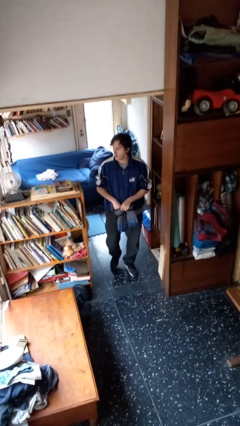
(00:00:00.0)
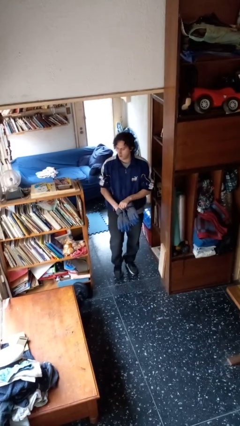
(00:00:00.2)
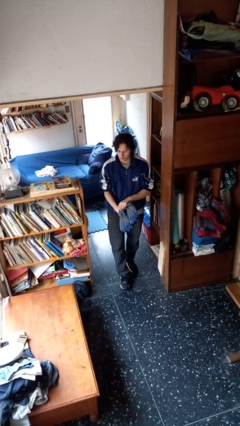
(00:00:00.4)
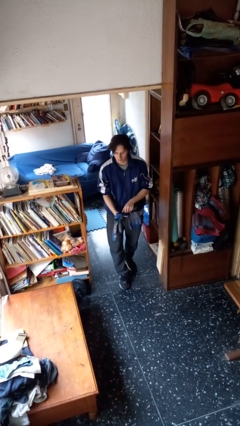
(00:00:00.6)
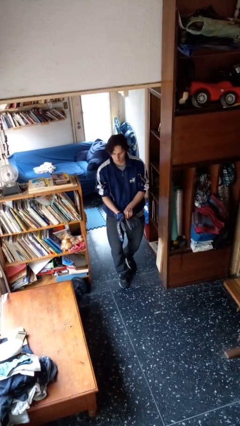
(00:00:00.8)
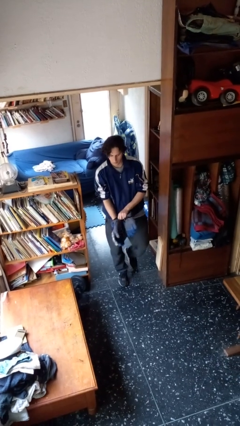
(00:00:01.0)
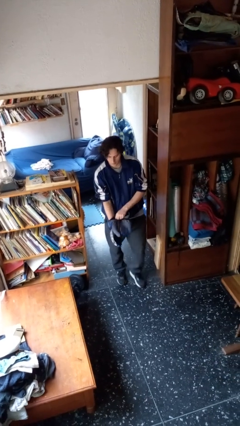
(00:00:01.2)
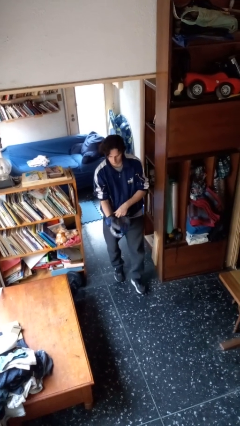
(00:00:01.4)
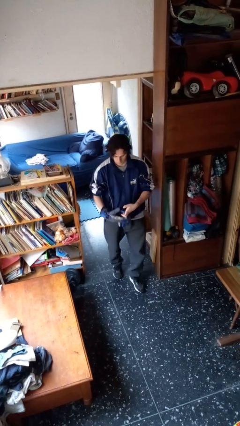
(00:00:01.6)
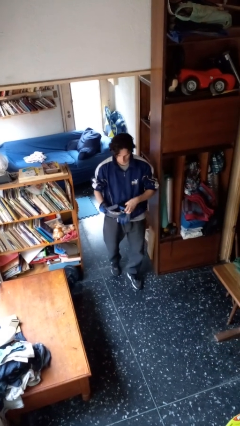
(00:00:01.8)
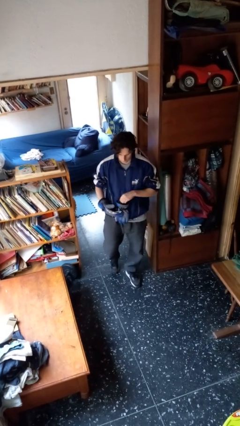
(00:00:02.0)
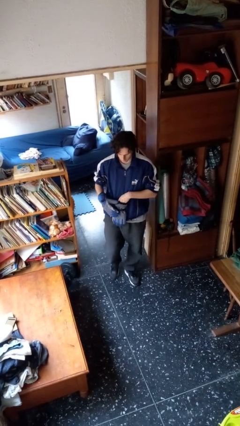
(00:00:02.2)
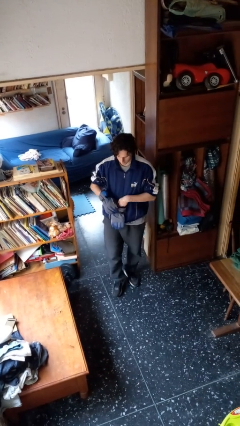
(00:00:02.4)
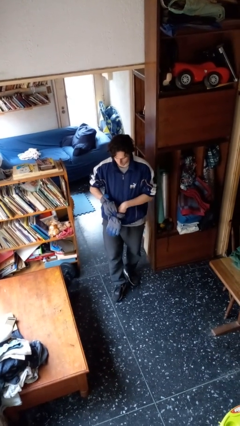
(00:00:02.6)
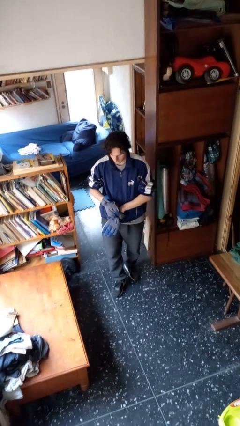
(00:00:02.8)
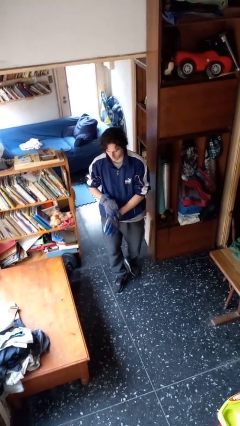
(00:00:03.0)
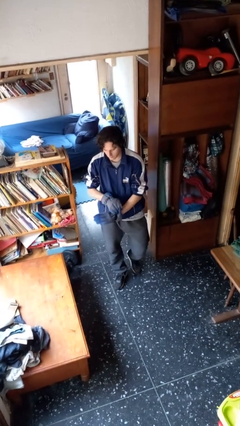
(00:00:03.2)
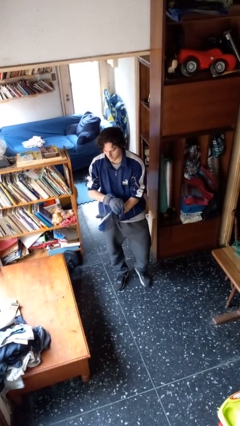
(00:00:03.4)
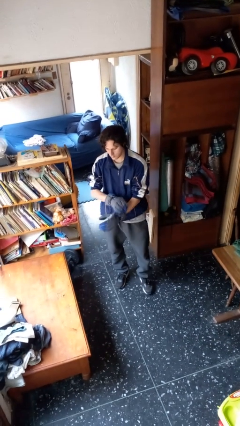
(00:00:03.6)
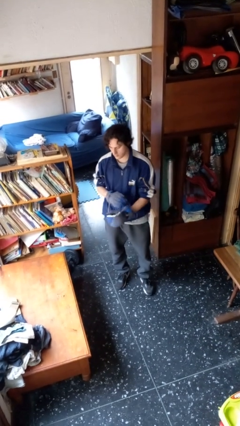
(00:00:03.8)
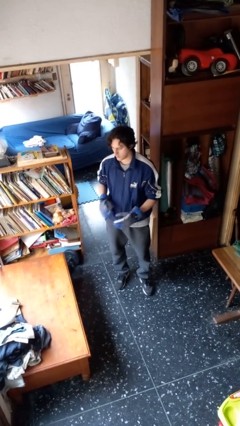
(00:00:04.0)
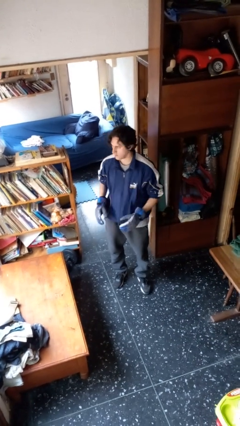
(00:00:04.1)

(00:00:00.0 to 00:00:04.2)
person puts on gloves

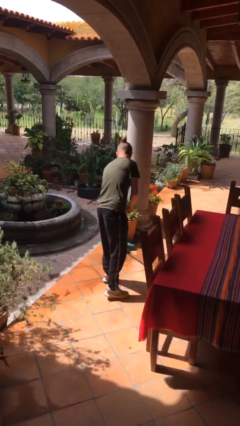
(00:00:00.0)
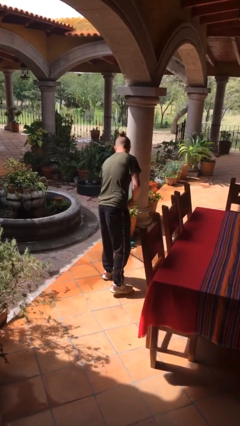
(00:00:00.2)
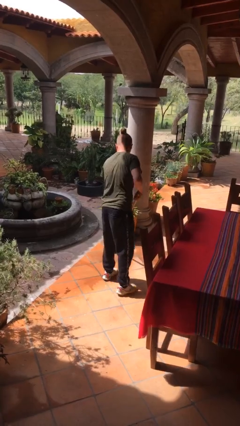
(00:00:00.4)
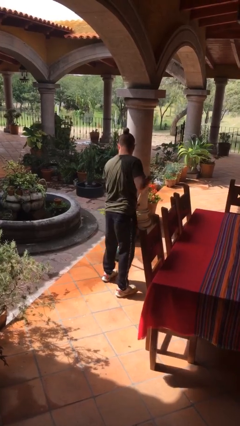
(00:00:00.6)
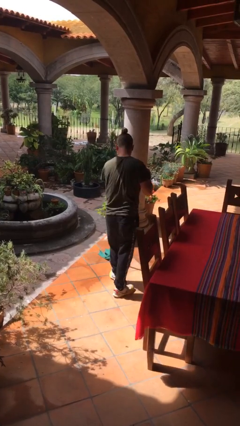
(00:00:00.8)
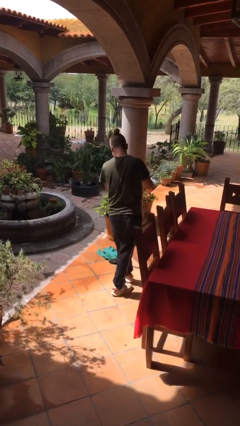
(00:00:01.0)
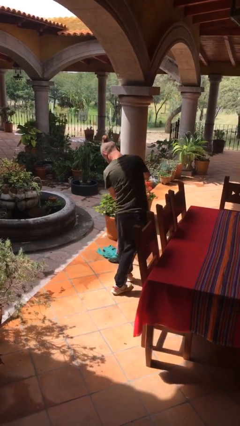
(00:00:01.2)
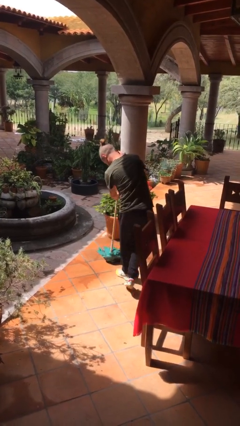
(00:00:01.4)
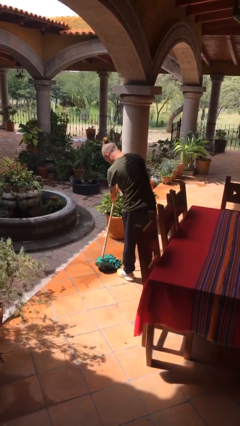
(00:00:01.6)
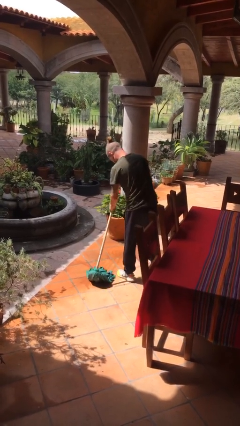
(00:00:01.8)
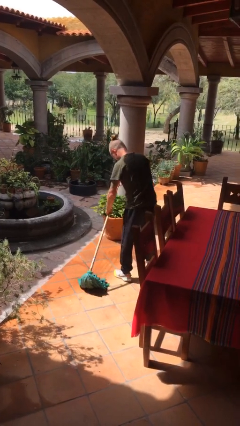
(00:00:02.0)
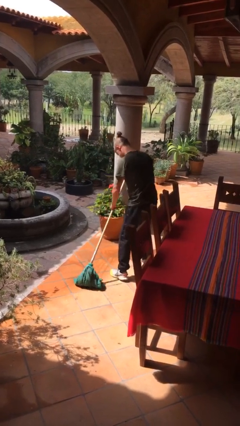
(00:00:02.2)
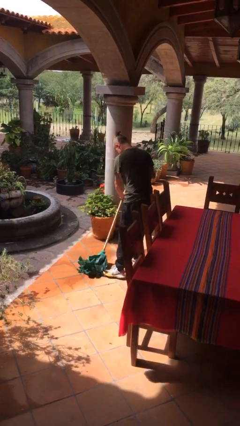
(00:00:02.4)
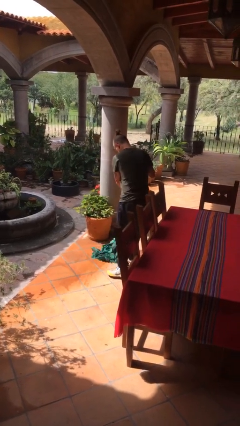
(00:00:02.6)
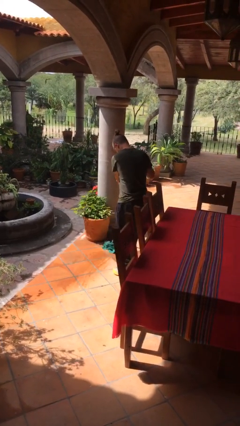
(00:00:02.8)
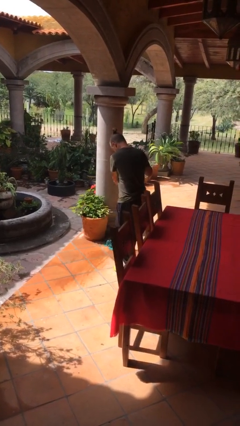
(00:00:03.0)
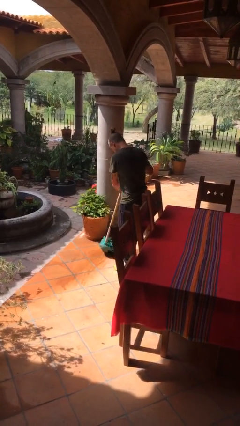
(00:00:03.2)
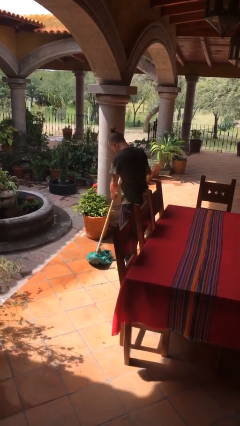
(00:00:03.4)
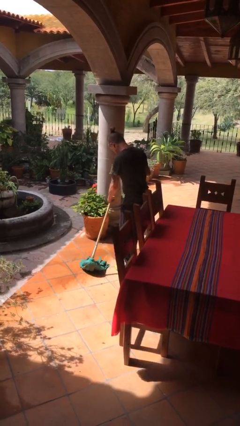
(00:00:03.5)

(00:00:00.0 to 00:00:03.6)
person mops

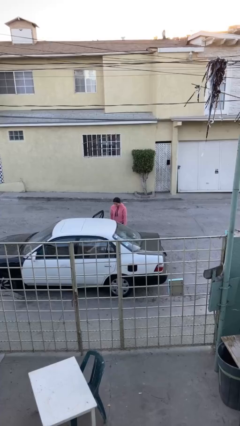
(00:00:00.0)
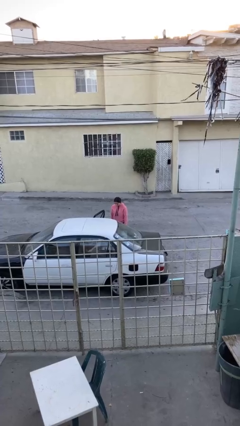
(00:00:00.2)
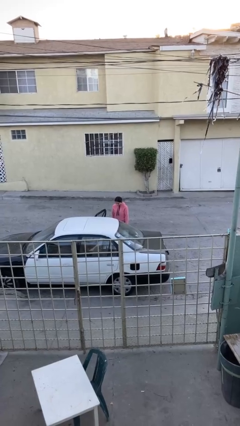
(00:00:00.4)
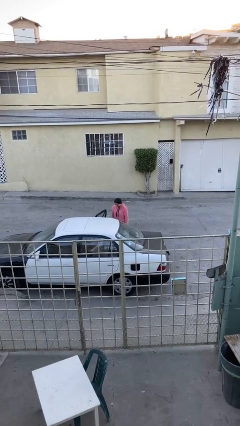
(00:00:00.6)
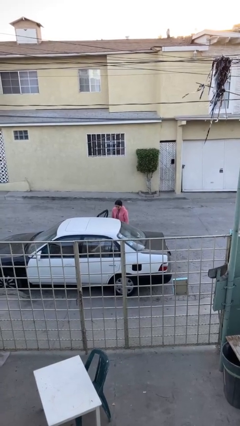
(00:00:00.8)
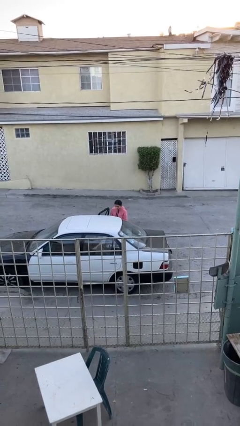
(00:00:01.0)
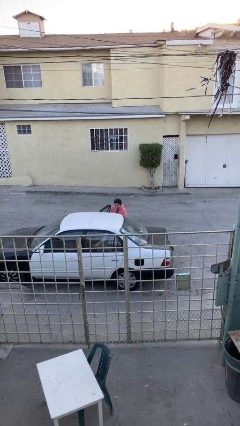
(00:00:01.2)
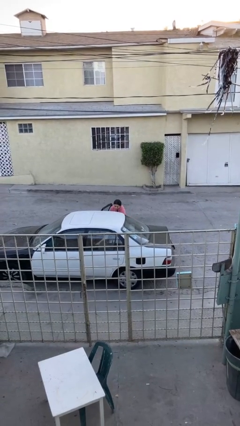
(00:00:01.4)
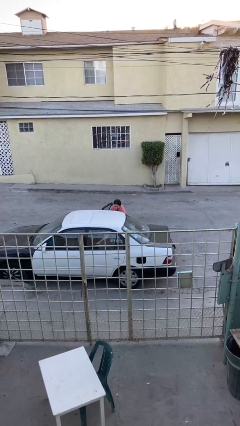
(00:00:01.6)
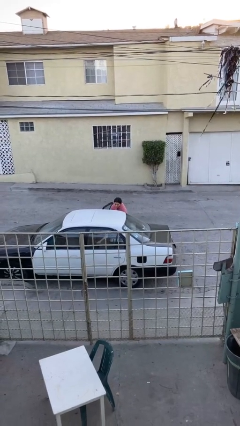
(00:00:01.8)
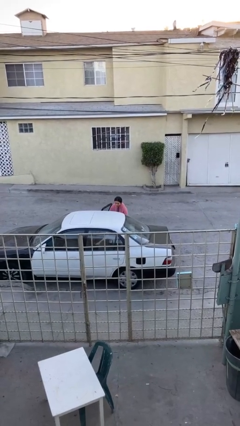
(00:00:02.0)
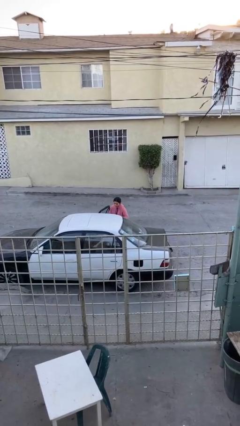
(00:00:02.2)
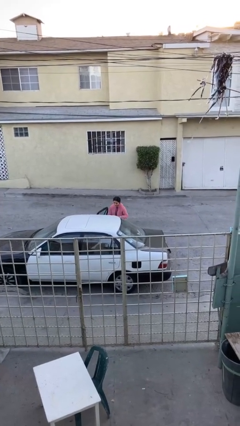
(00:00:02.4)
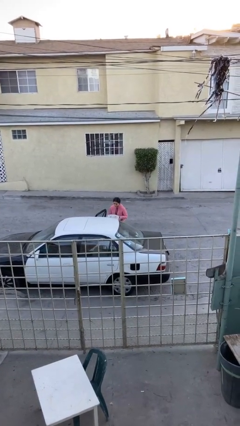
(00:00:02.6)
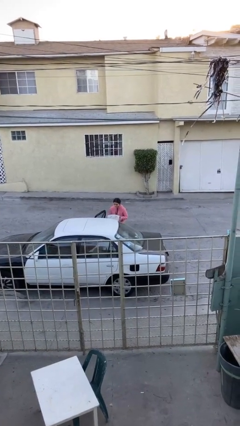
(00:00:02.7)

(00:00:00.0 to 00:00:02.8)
person unloads car

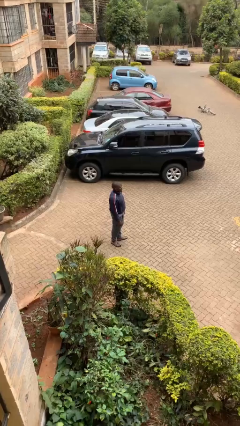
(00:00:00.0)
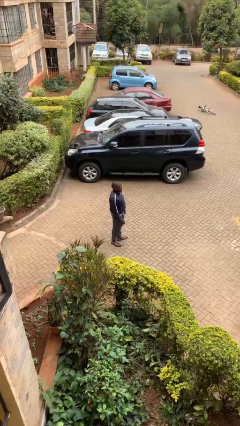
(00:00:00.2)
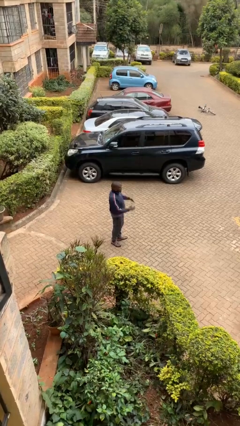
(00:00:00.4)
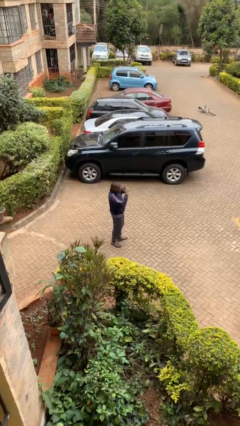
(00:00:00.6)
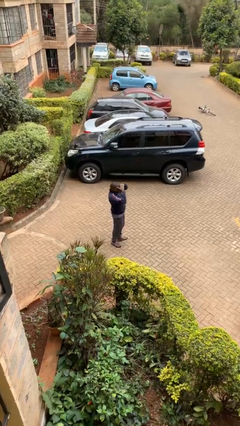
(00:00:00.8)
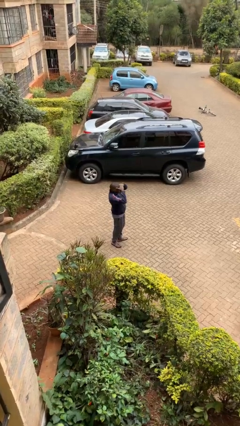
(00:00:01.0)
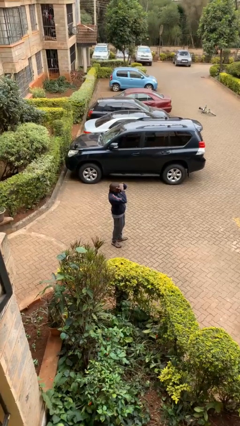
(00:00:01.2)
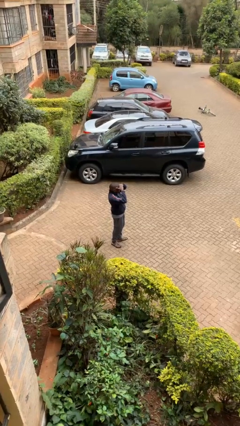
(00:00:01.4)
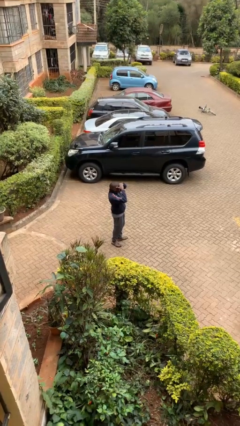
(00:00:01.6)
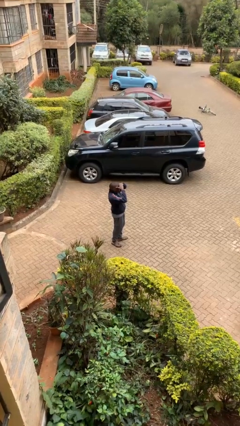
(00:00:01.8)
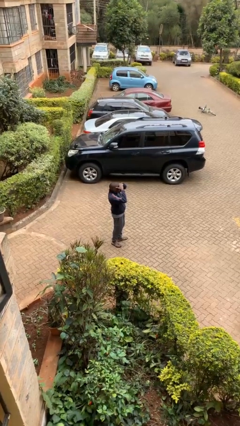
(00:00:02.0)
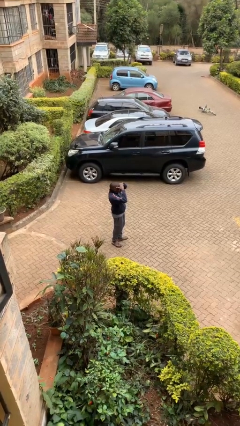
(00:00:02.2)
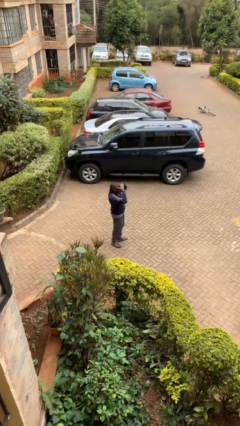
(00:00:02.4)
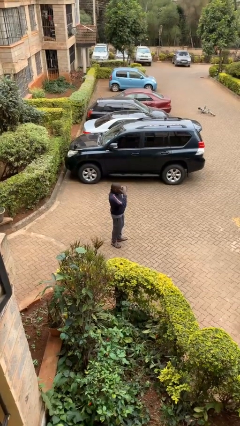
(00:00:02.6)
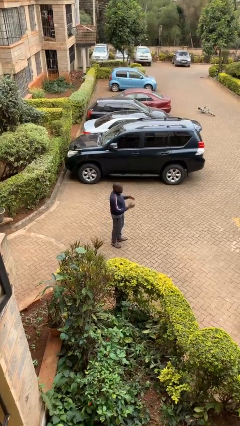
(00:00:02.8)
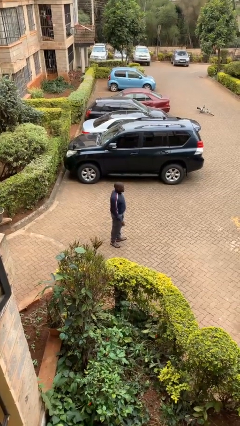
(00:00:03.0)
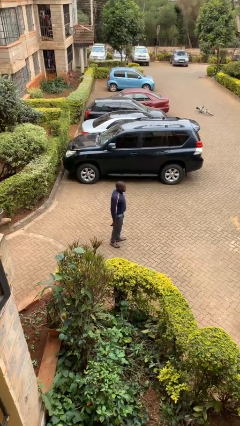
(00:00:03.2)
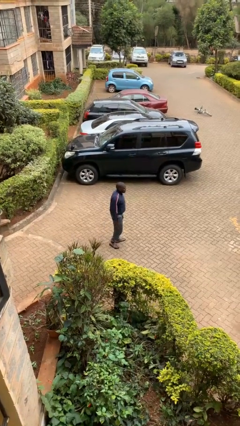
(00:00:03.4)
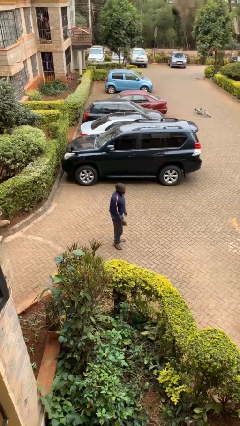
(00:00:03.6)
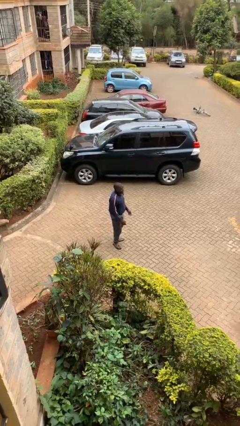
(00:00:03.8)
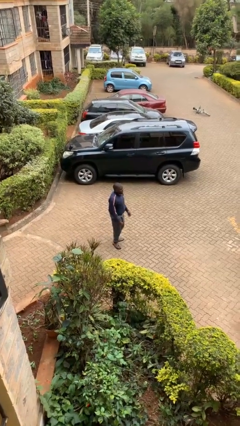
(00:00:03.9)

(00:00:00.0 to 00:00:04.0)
person shades eyes

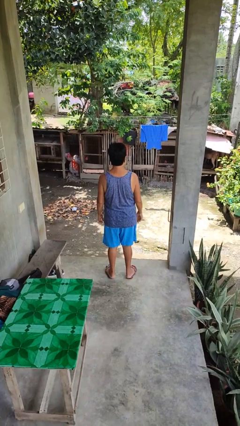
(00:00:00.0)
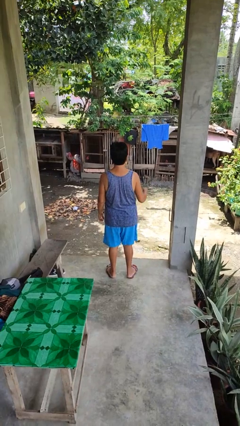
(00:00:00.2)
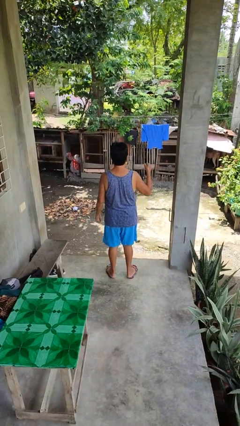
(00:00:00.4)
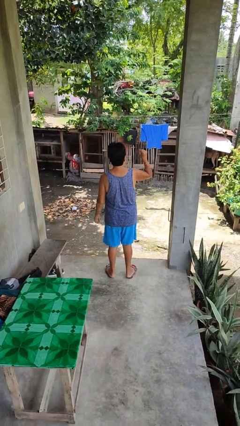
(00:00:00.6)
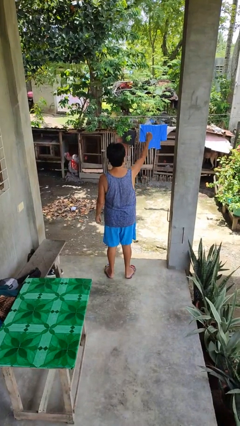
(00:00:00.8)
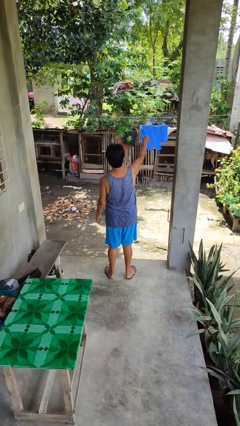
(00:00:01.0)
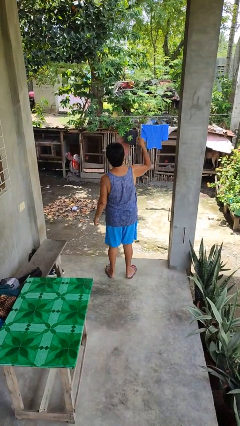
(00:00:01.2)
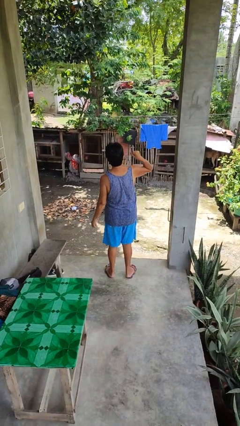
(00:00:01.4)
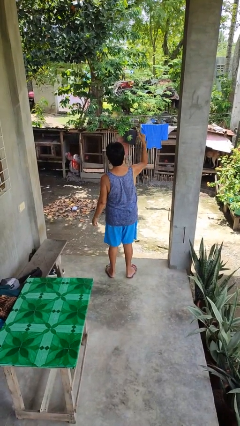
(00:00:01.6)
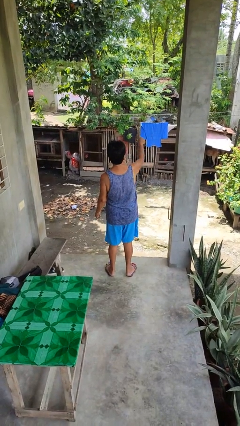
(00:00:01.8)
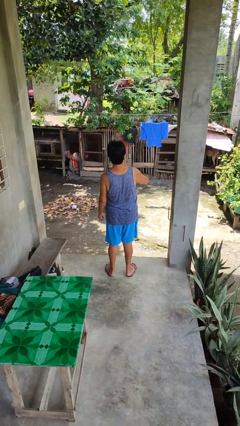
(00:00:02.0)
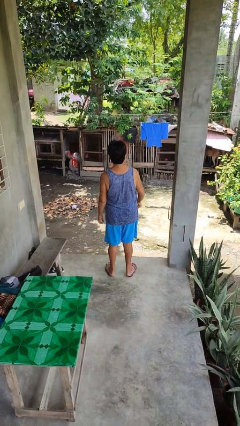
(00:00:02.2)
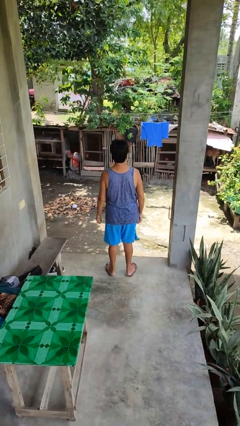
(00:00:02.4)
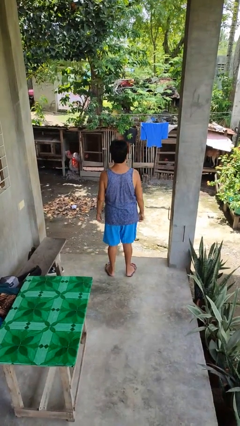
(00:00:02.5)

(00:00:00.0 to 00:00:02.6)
person punches
